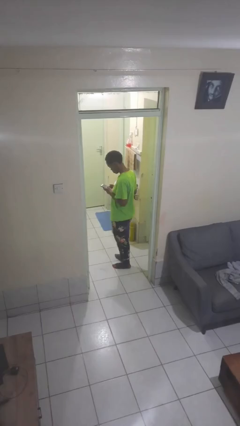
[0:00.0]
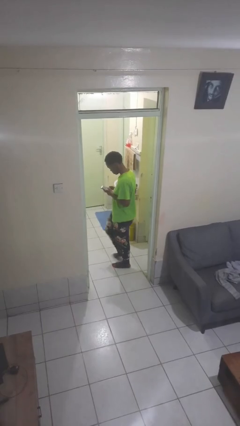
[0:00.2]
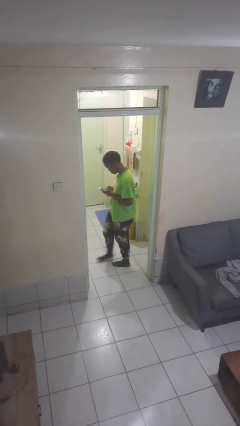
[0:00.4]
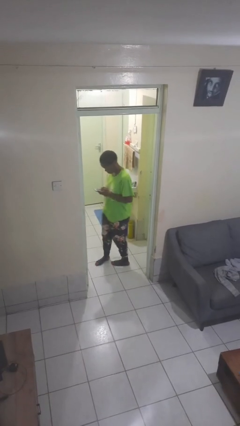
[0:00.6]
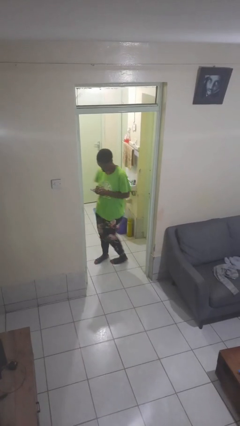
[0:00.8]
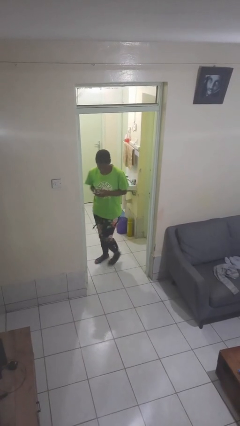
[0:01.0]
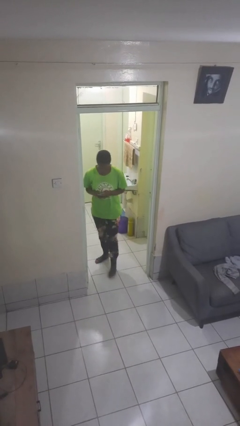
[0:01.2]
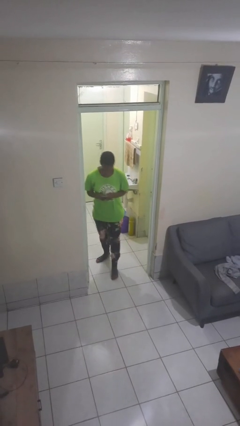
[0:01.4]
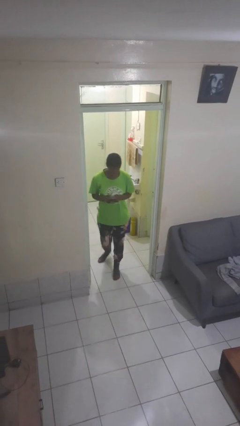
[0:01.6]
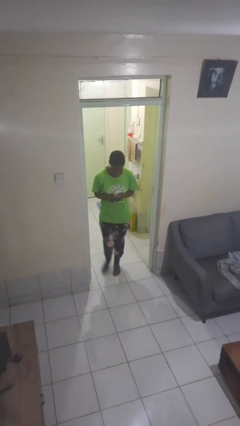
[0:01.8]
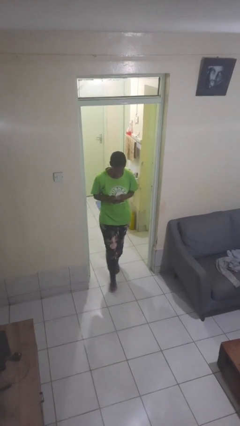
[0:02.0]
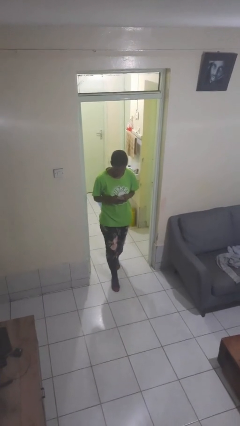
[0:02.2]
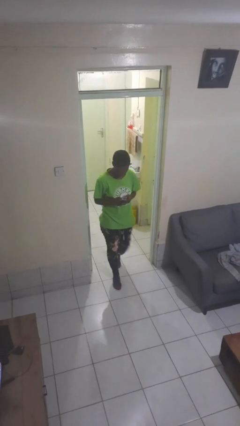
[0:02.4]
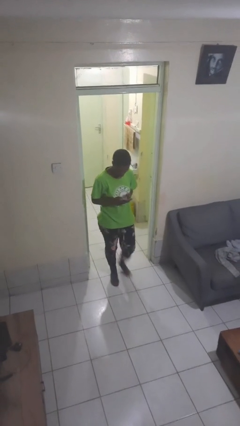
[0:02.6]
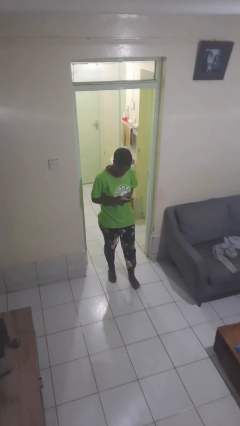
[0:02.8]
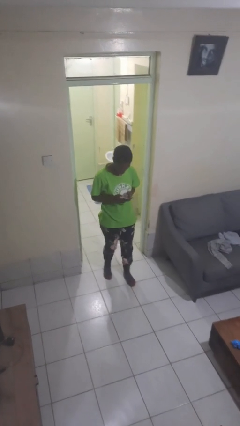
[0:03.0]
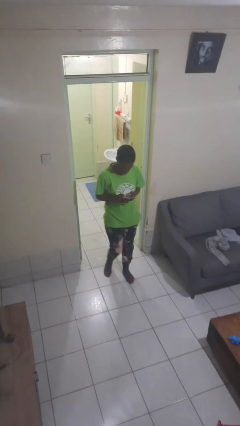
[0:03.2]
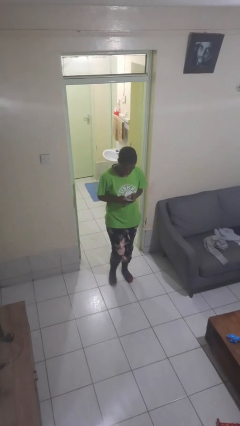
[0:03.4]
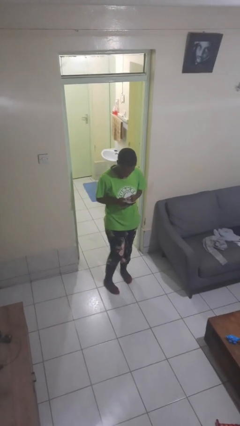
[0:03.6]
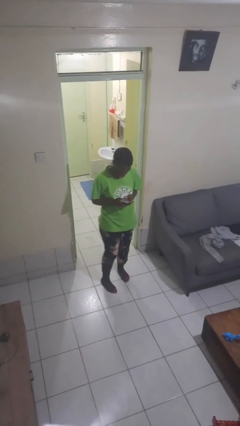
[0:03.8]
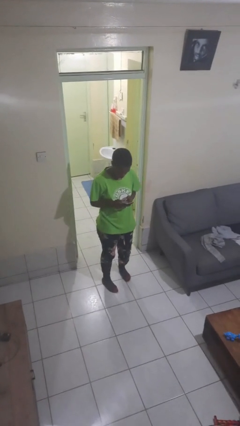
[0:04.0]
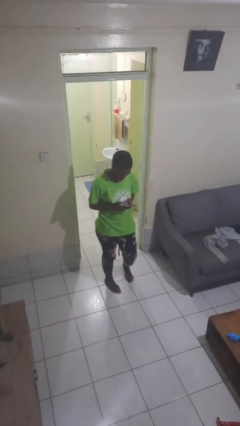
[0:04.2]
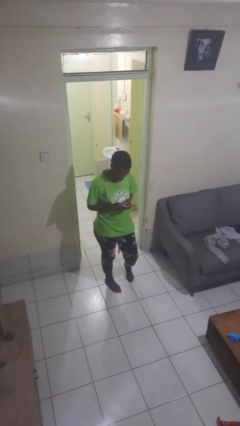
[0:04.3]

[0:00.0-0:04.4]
person enters scene through structure

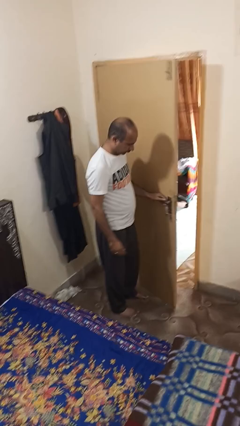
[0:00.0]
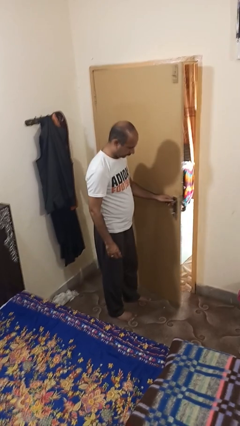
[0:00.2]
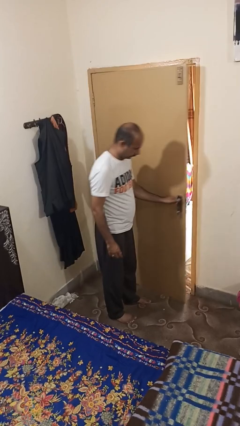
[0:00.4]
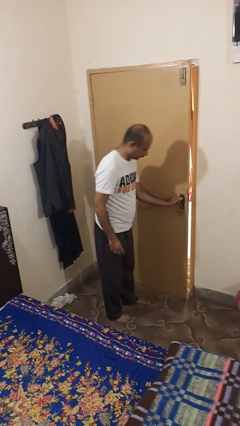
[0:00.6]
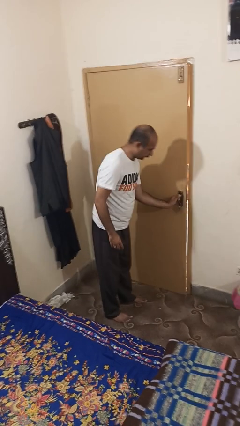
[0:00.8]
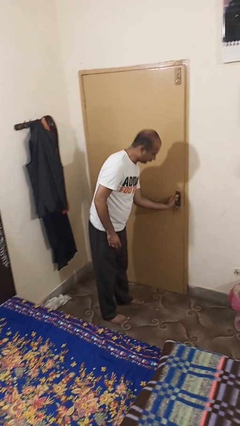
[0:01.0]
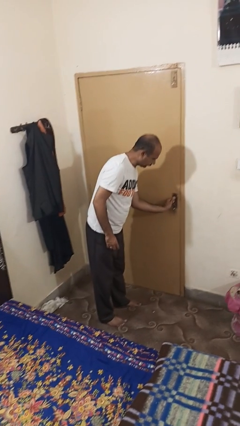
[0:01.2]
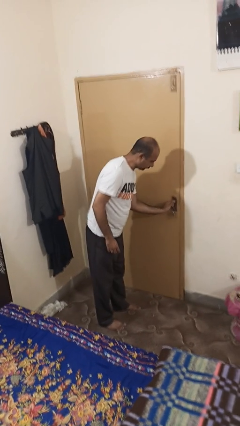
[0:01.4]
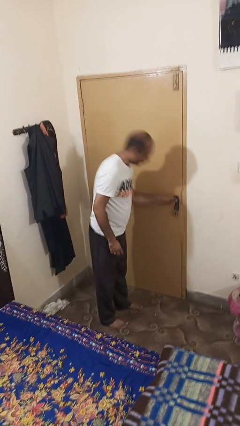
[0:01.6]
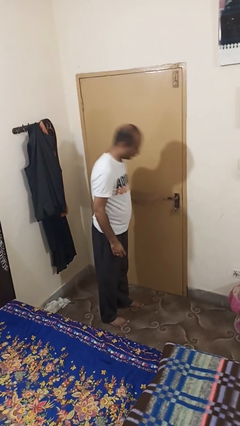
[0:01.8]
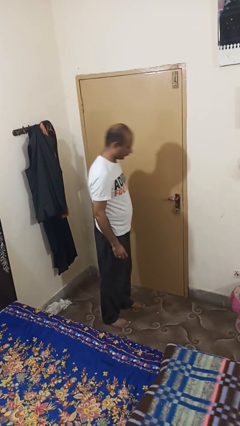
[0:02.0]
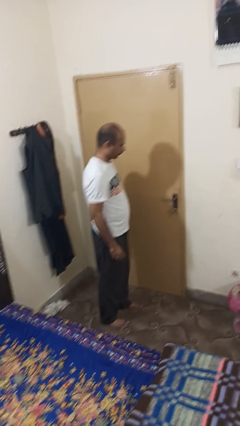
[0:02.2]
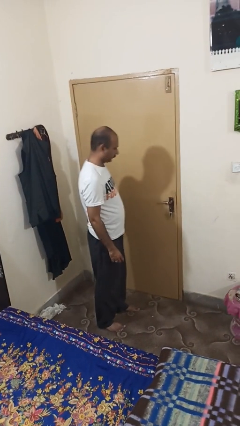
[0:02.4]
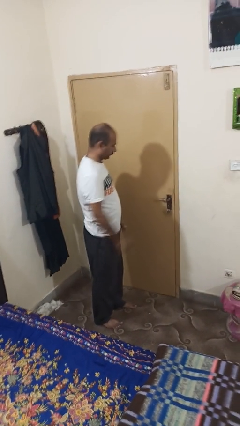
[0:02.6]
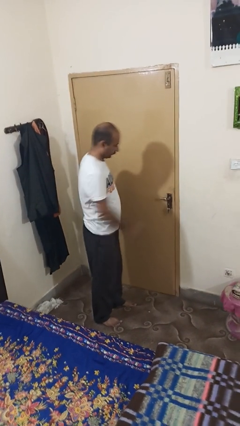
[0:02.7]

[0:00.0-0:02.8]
person closes facility door

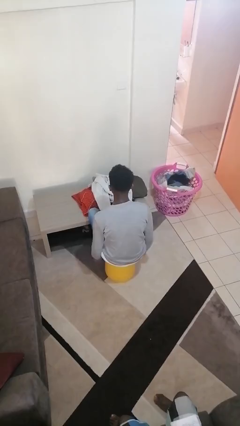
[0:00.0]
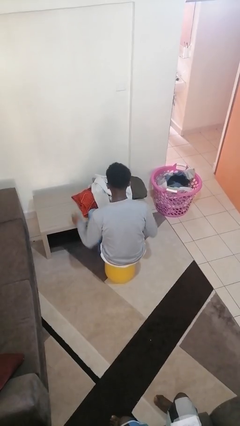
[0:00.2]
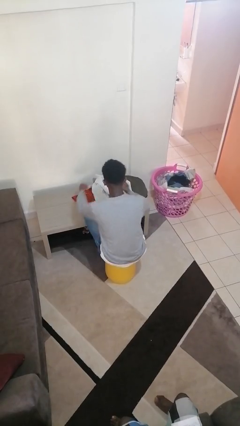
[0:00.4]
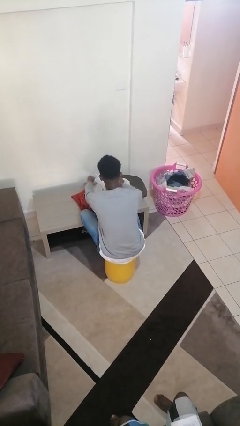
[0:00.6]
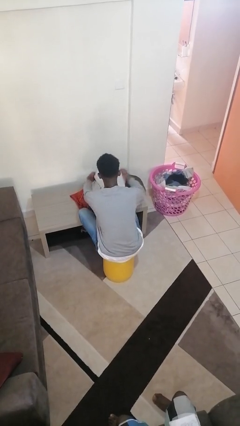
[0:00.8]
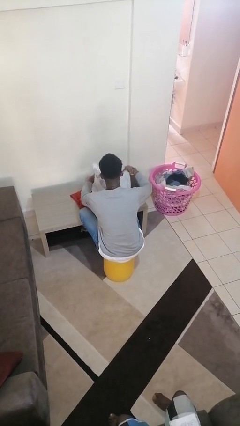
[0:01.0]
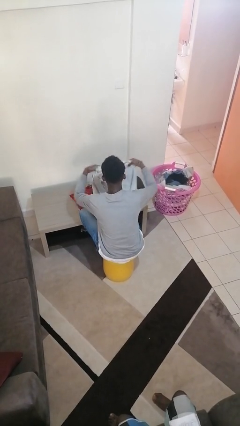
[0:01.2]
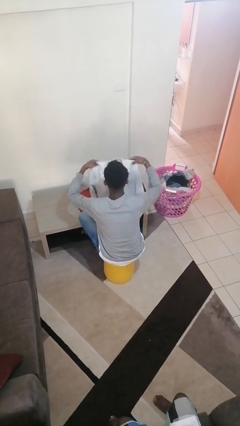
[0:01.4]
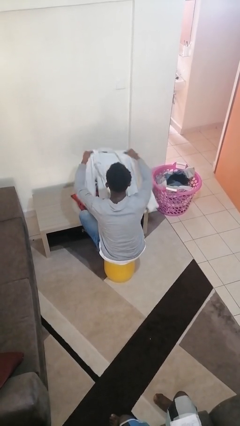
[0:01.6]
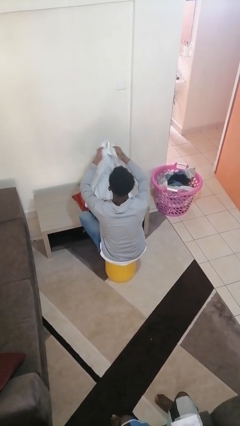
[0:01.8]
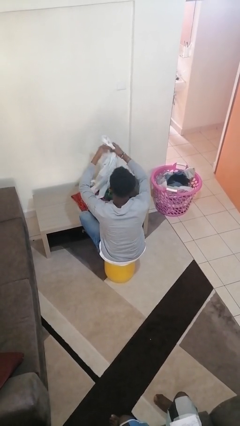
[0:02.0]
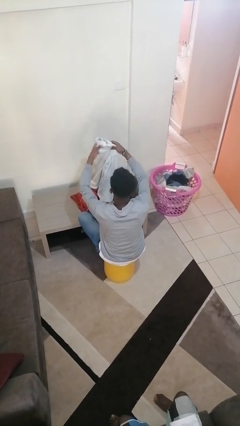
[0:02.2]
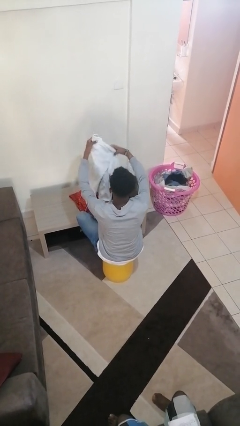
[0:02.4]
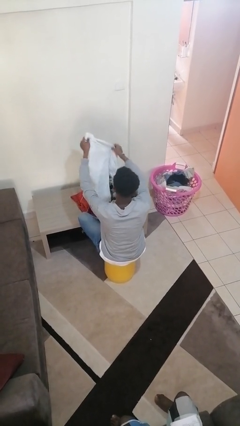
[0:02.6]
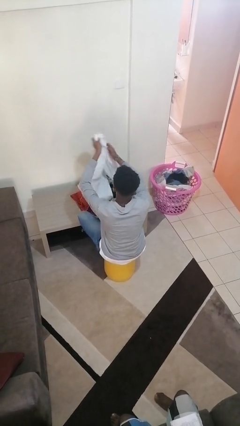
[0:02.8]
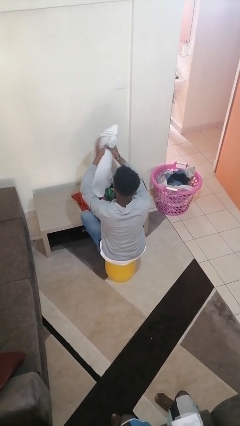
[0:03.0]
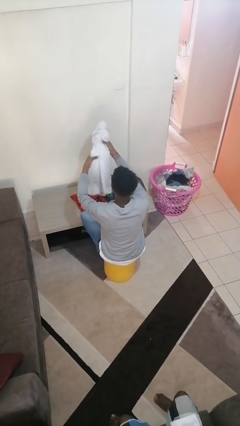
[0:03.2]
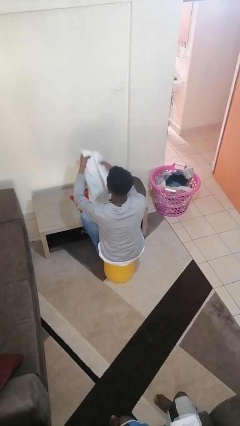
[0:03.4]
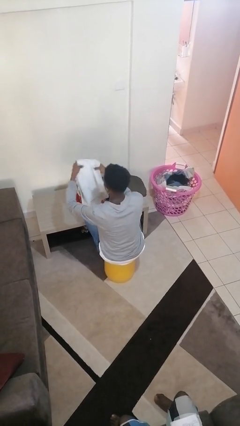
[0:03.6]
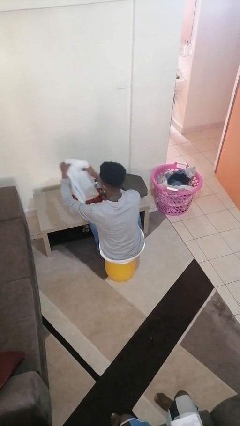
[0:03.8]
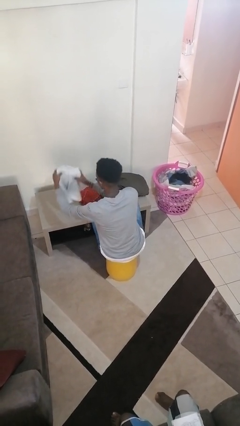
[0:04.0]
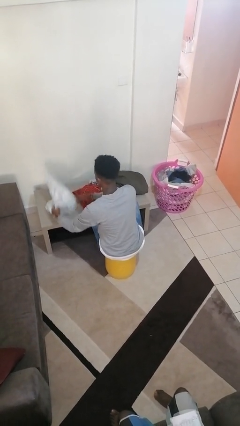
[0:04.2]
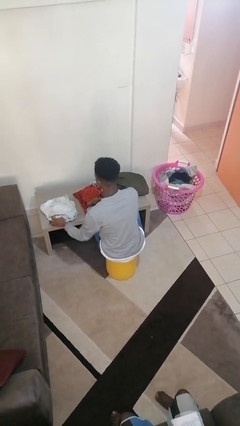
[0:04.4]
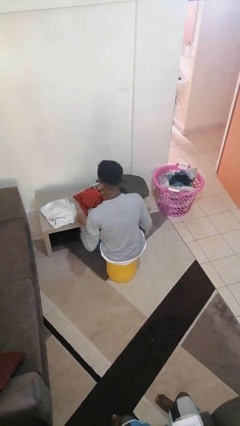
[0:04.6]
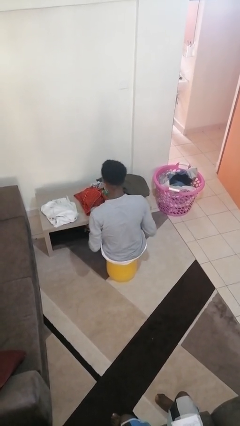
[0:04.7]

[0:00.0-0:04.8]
person folds shirt

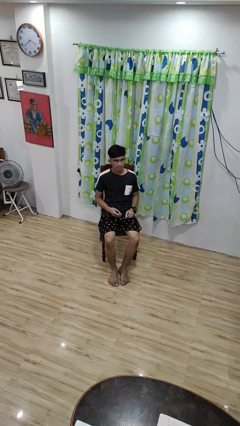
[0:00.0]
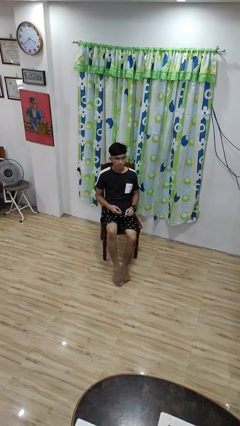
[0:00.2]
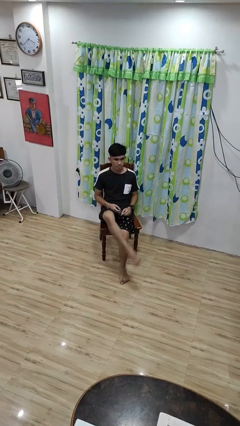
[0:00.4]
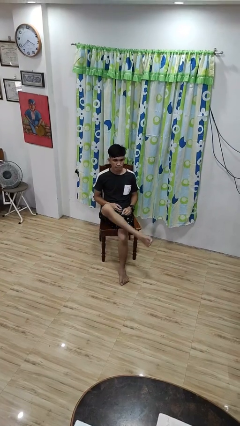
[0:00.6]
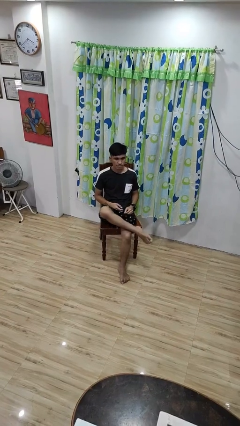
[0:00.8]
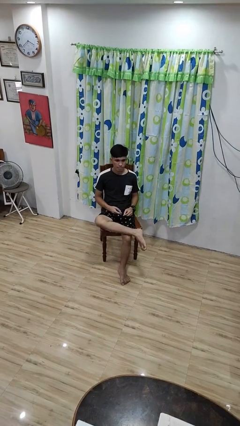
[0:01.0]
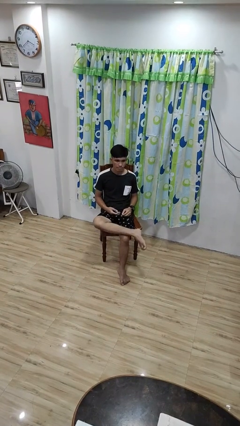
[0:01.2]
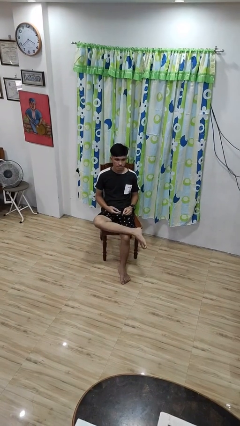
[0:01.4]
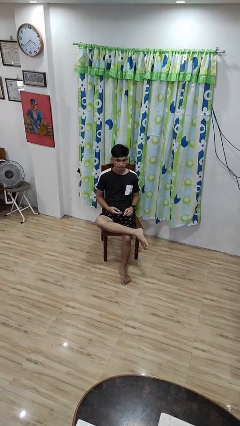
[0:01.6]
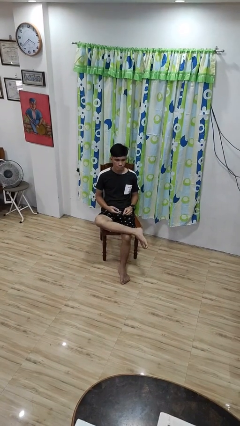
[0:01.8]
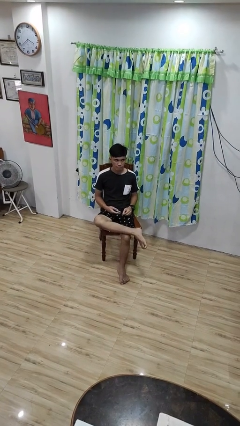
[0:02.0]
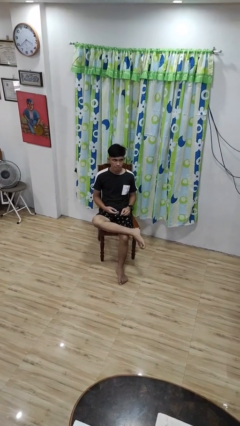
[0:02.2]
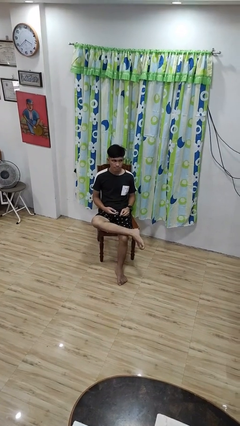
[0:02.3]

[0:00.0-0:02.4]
person crosses legs

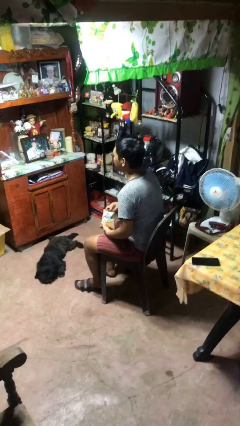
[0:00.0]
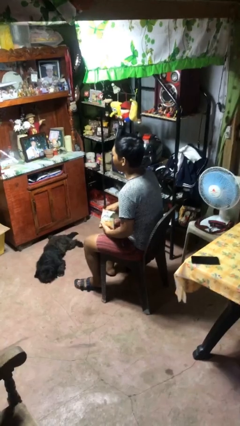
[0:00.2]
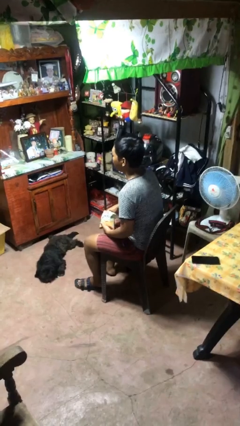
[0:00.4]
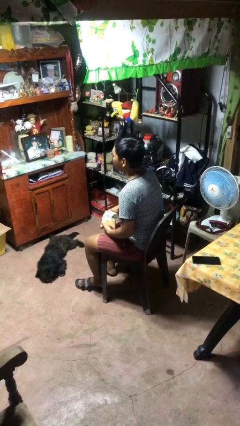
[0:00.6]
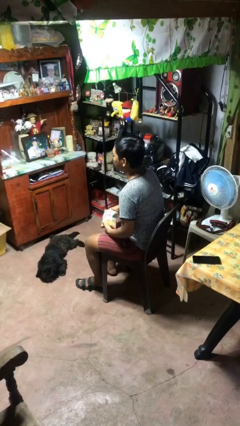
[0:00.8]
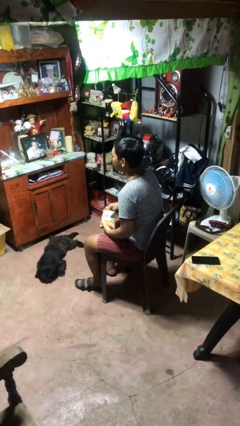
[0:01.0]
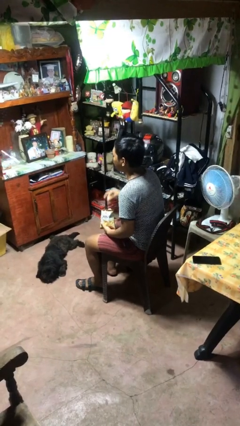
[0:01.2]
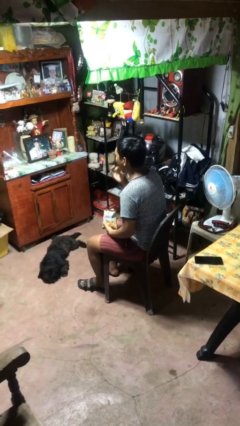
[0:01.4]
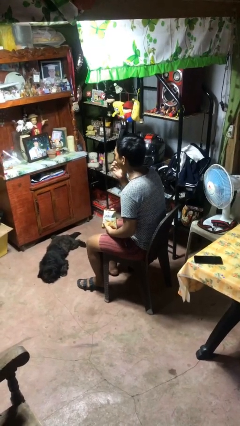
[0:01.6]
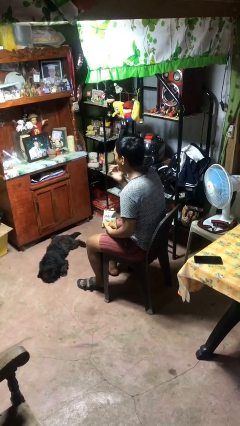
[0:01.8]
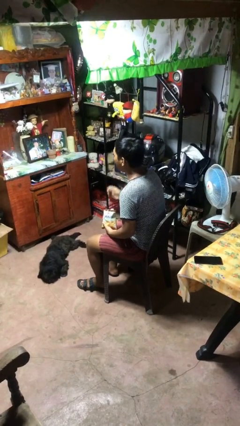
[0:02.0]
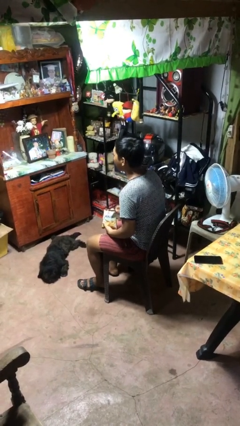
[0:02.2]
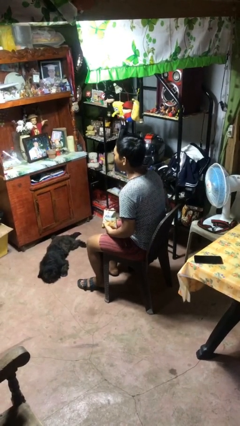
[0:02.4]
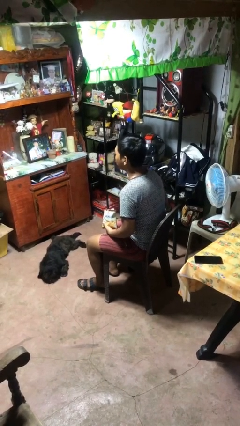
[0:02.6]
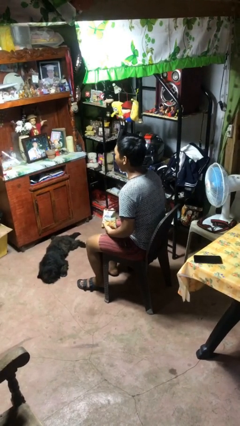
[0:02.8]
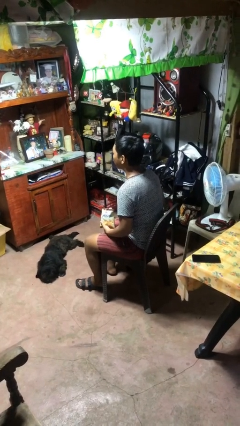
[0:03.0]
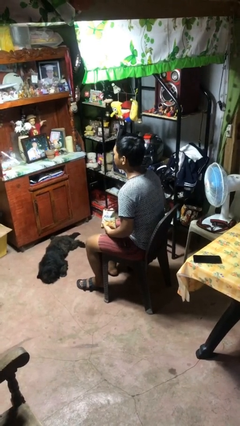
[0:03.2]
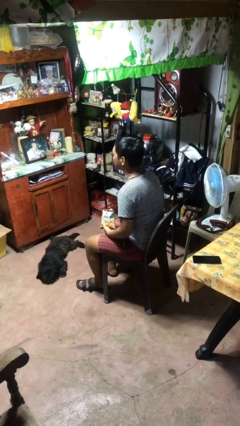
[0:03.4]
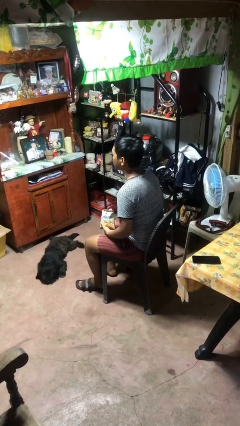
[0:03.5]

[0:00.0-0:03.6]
person eats snack from bag
